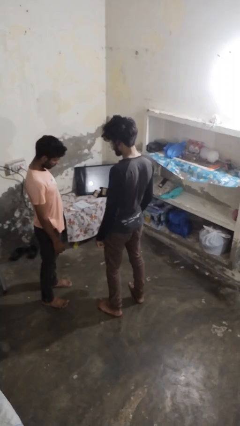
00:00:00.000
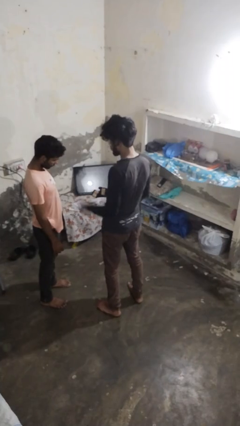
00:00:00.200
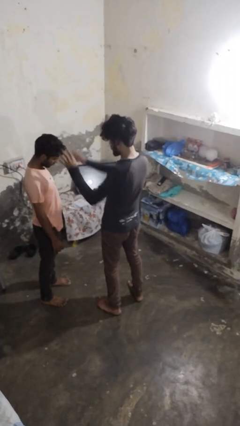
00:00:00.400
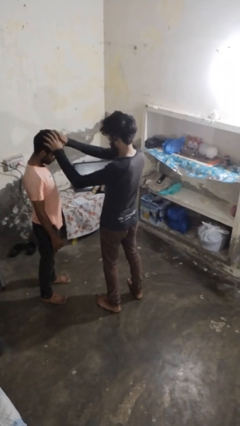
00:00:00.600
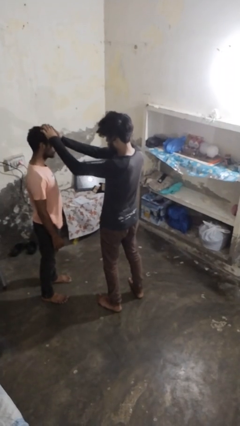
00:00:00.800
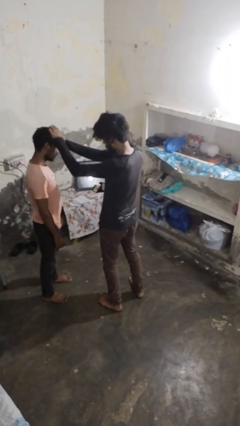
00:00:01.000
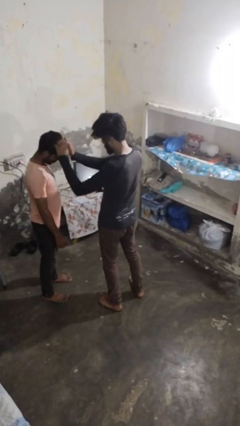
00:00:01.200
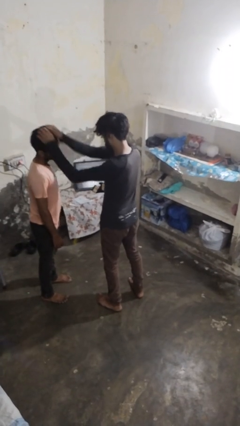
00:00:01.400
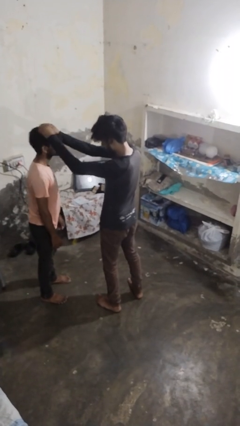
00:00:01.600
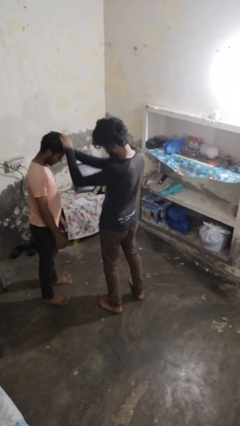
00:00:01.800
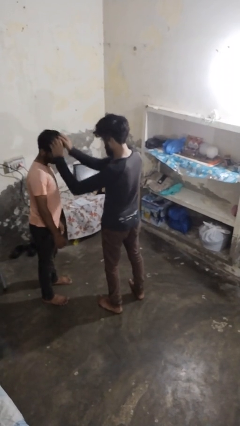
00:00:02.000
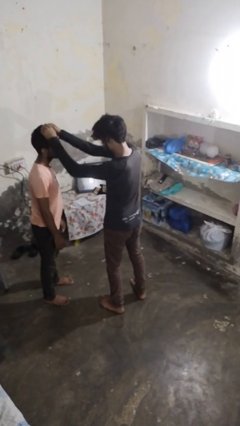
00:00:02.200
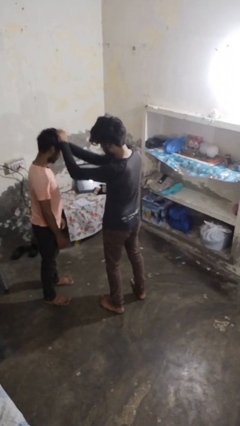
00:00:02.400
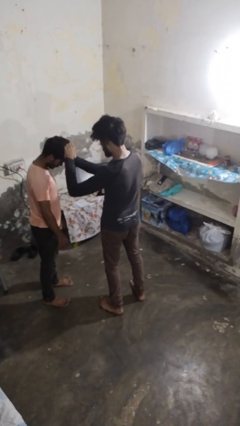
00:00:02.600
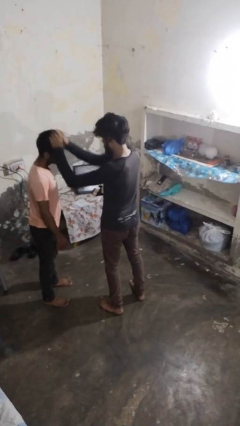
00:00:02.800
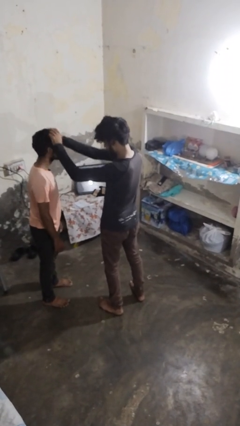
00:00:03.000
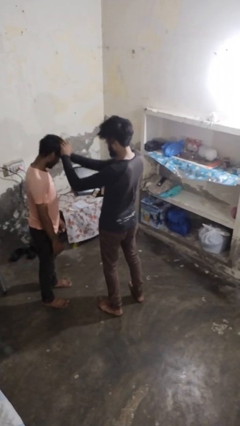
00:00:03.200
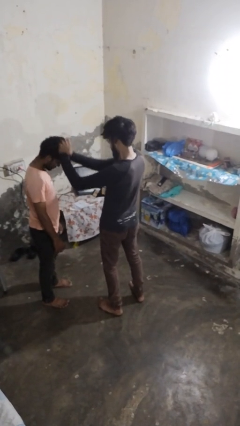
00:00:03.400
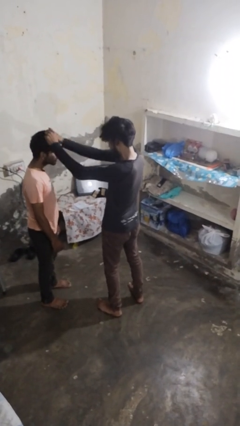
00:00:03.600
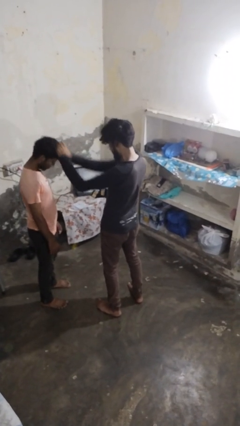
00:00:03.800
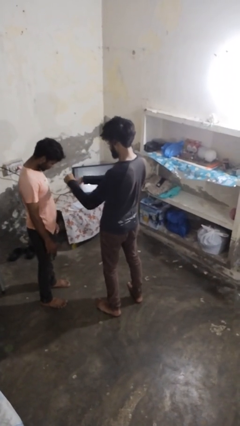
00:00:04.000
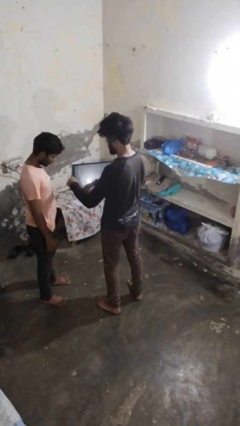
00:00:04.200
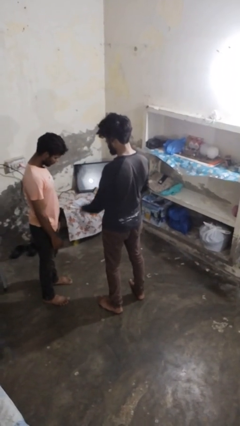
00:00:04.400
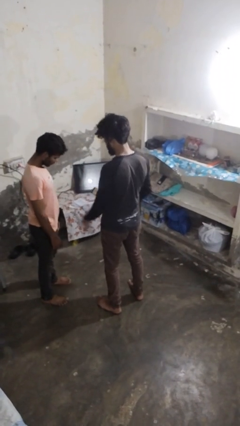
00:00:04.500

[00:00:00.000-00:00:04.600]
person grabs person by hair

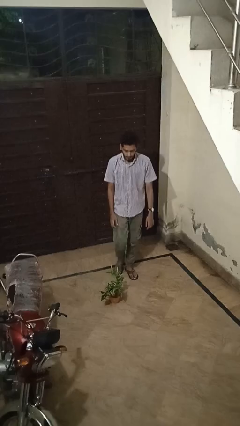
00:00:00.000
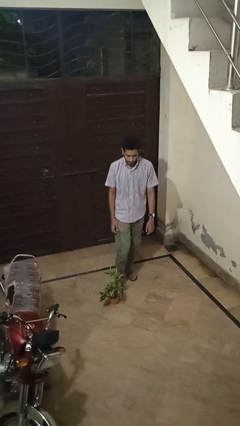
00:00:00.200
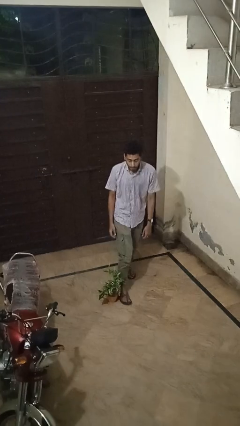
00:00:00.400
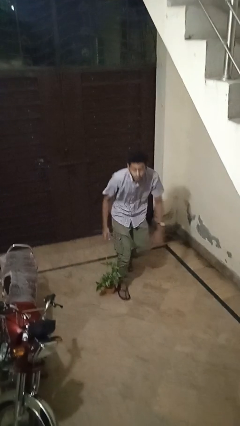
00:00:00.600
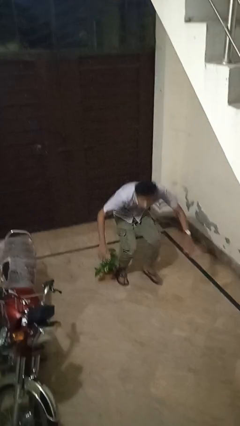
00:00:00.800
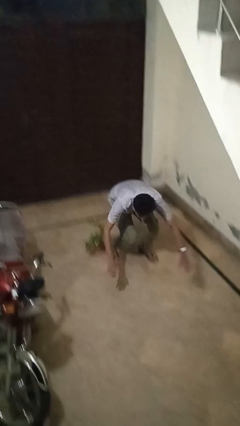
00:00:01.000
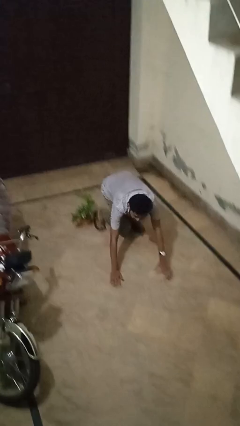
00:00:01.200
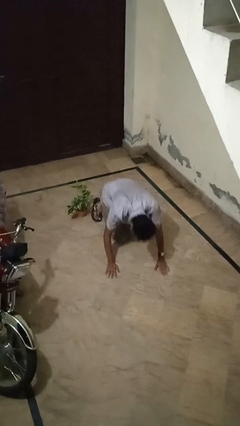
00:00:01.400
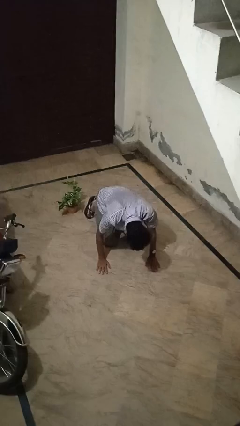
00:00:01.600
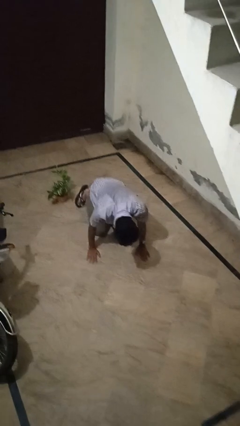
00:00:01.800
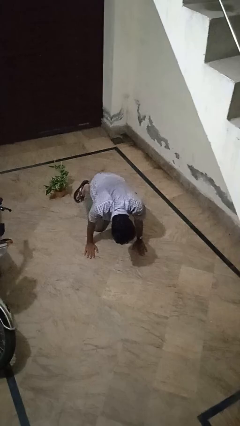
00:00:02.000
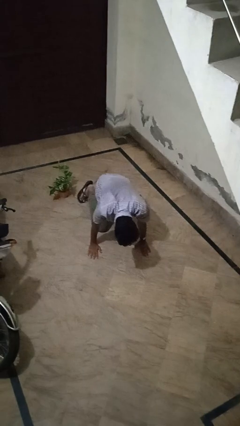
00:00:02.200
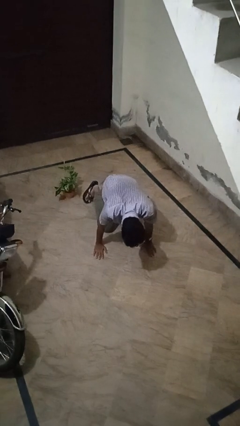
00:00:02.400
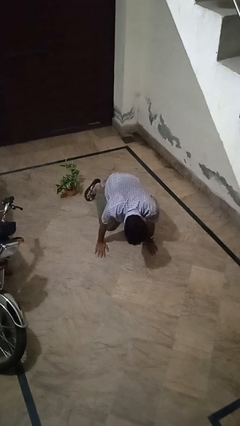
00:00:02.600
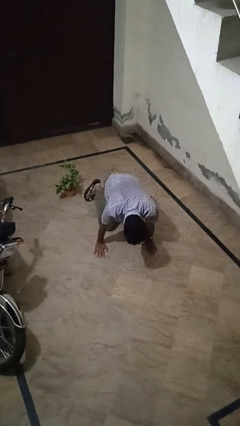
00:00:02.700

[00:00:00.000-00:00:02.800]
person trips on object on floor

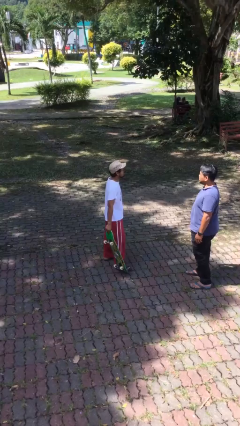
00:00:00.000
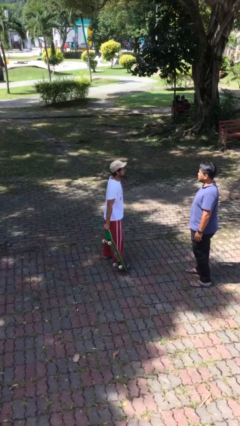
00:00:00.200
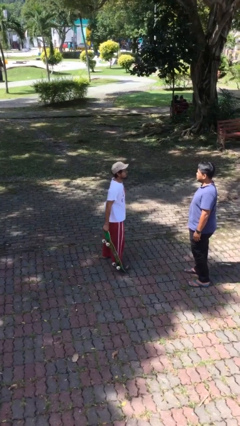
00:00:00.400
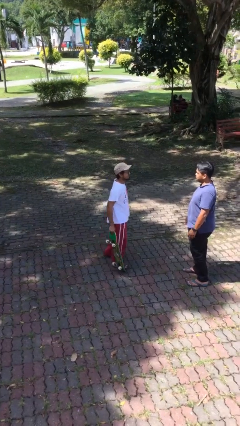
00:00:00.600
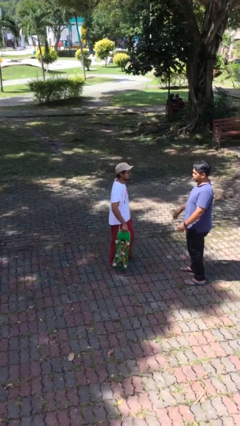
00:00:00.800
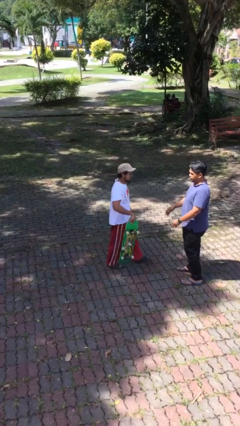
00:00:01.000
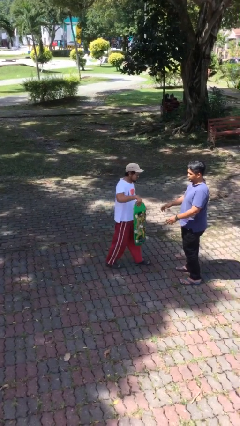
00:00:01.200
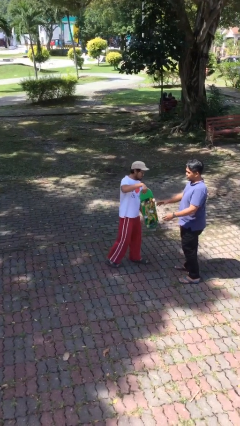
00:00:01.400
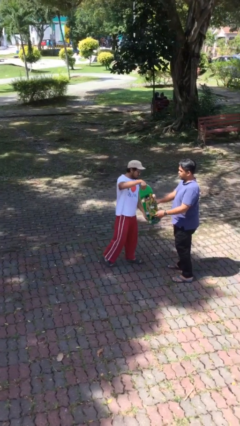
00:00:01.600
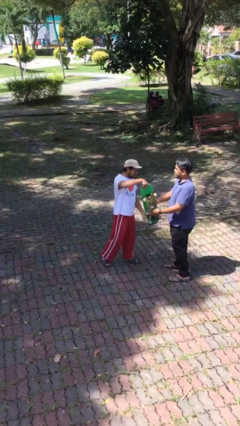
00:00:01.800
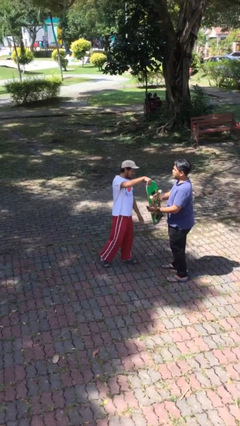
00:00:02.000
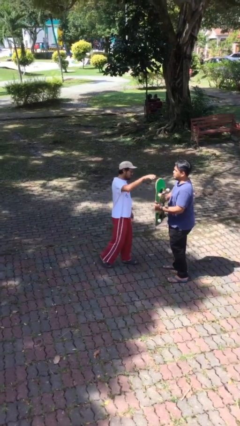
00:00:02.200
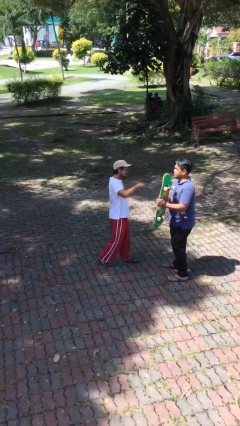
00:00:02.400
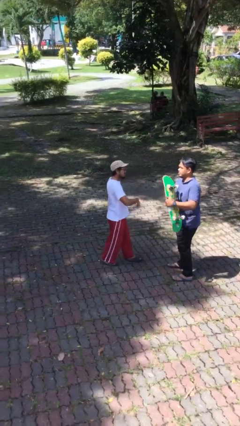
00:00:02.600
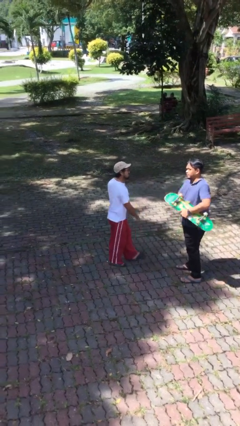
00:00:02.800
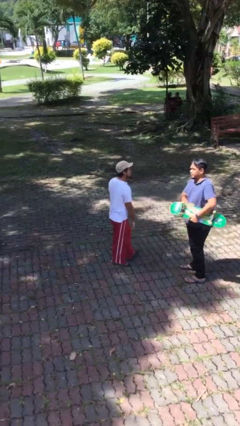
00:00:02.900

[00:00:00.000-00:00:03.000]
person transfers object to person

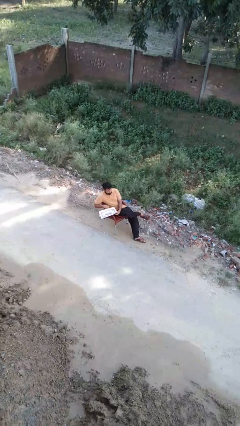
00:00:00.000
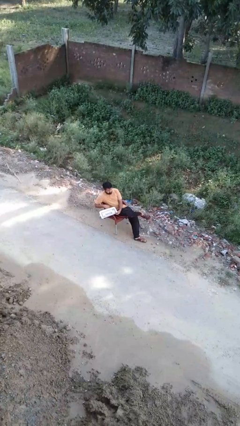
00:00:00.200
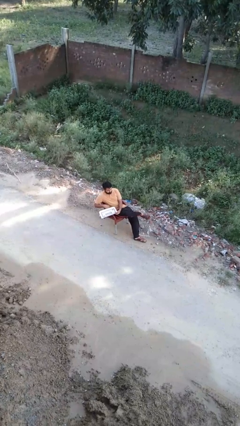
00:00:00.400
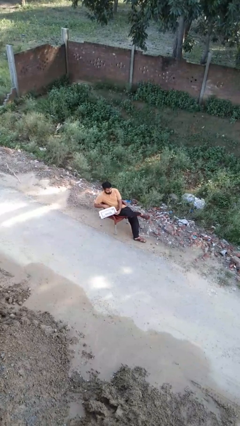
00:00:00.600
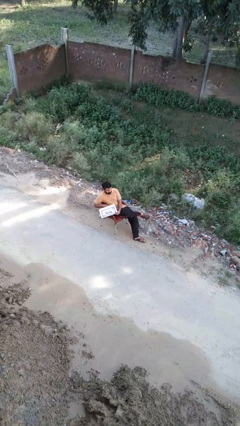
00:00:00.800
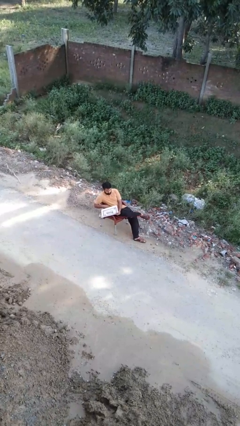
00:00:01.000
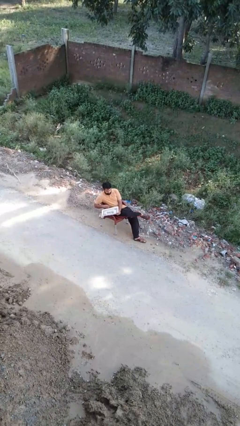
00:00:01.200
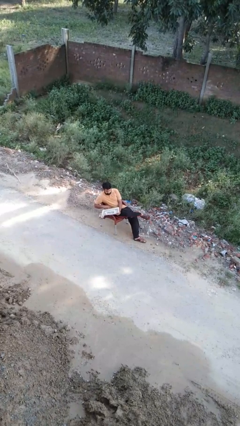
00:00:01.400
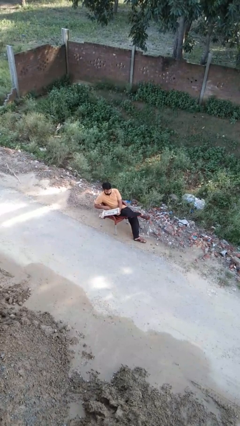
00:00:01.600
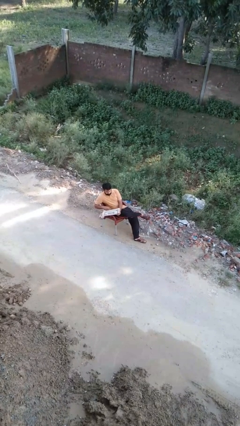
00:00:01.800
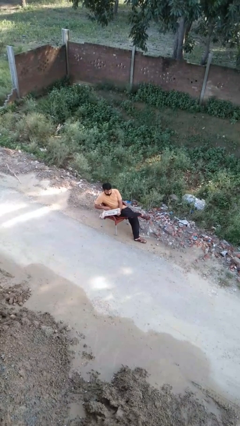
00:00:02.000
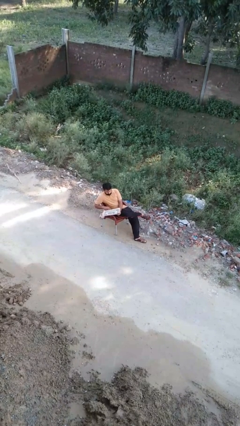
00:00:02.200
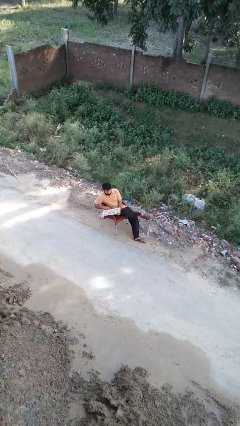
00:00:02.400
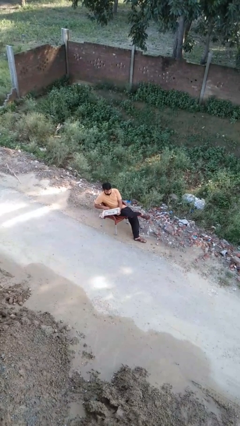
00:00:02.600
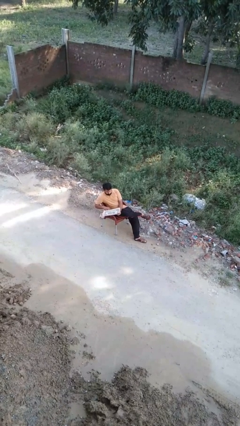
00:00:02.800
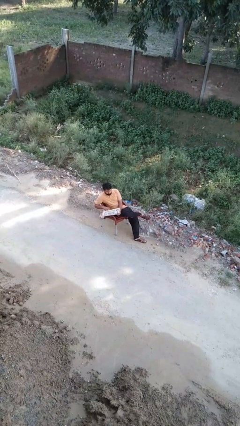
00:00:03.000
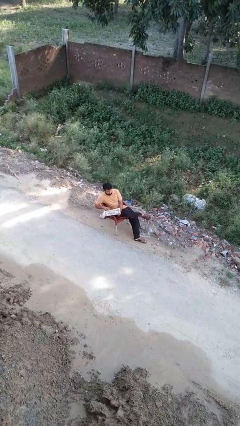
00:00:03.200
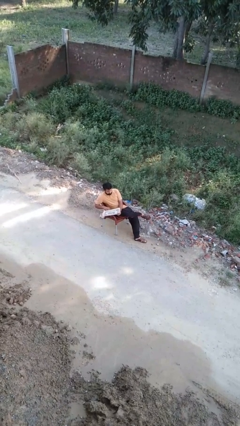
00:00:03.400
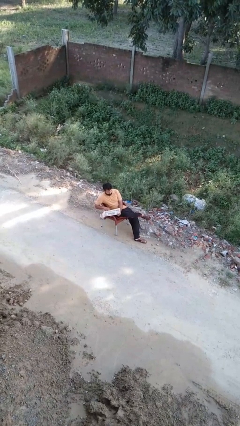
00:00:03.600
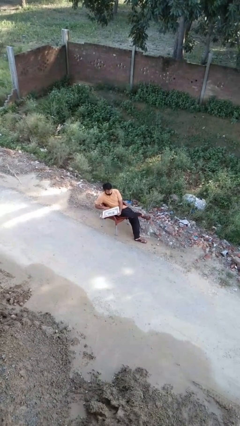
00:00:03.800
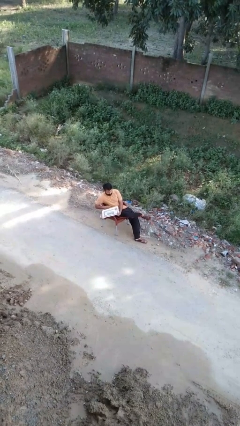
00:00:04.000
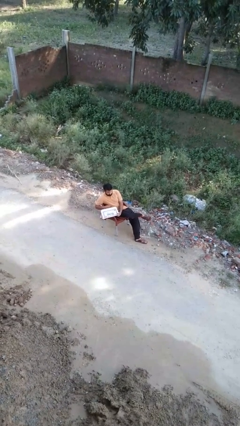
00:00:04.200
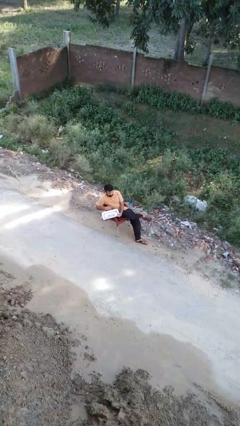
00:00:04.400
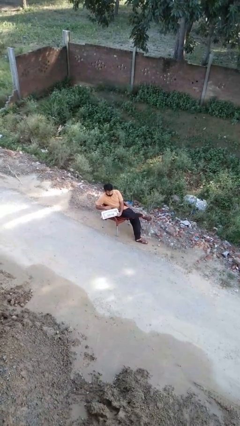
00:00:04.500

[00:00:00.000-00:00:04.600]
person opens laptop

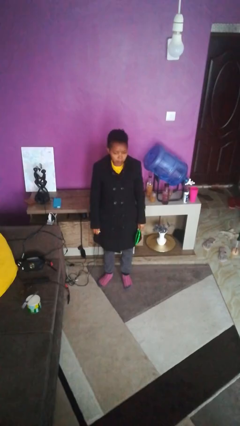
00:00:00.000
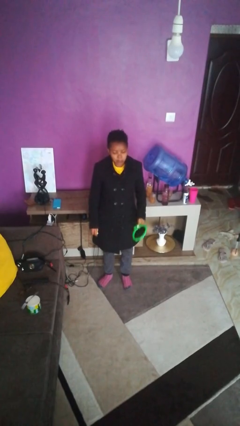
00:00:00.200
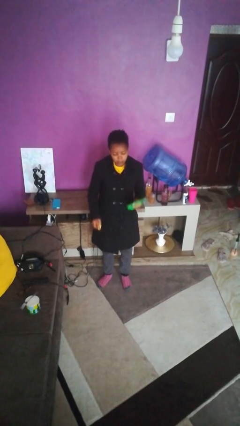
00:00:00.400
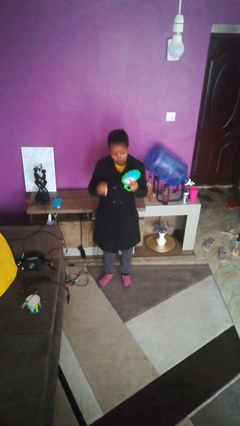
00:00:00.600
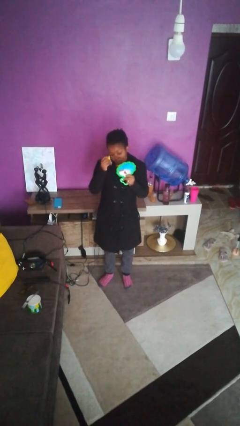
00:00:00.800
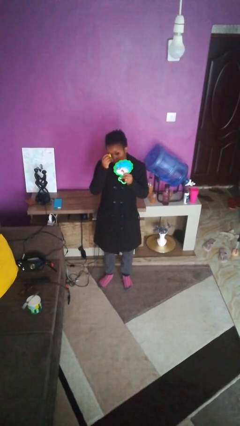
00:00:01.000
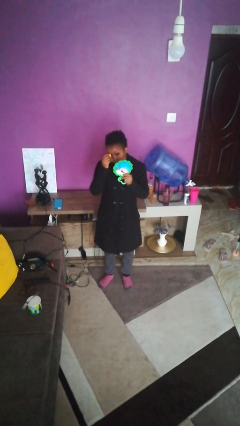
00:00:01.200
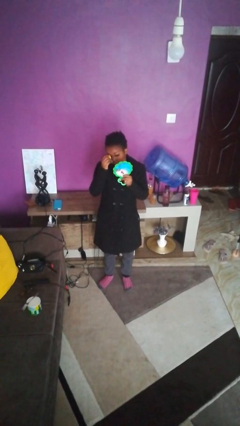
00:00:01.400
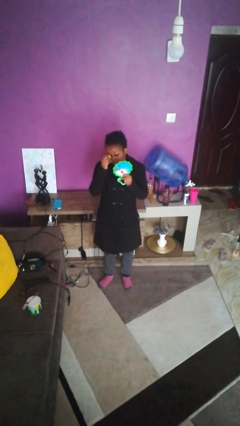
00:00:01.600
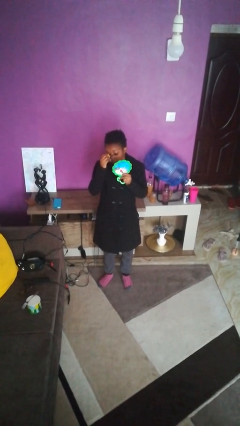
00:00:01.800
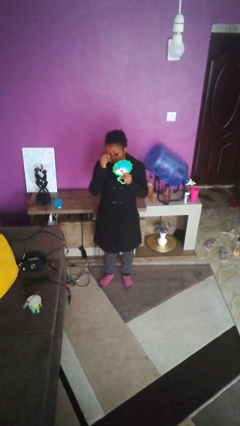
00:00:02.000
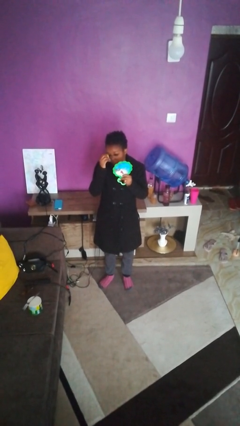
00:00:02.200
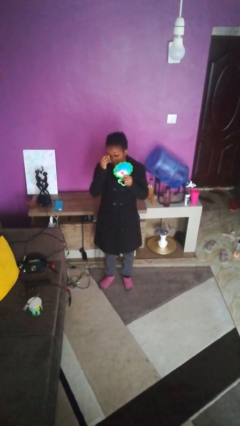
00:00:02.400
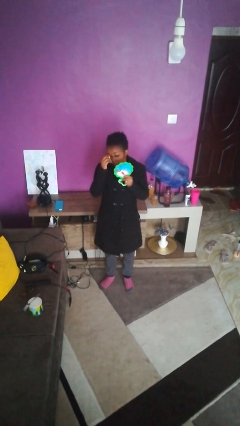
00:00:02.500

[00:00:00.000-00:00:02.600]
person applies eye makeup
